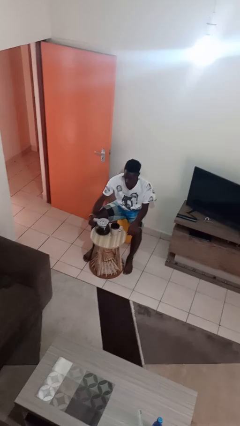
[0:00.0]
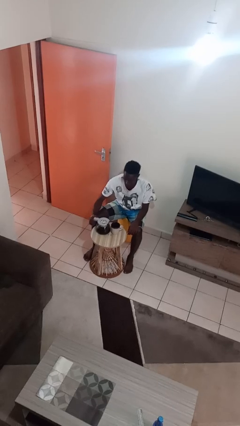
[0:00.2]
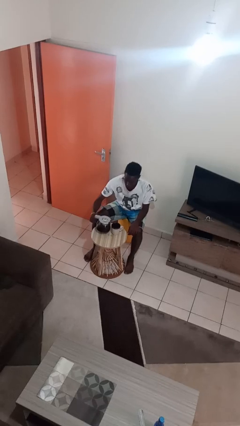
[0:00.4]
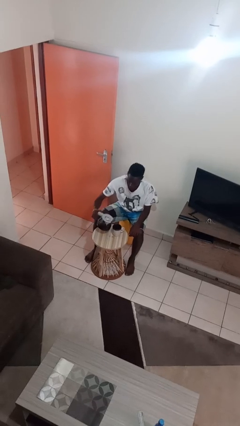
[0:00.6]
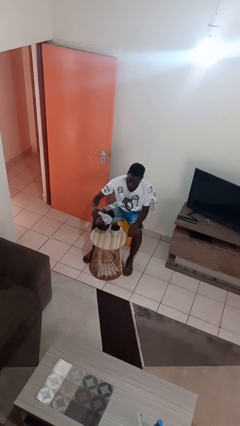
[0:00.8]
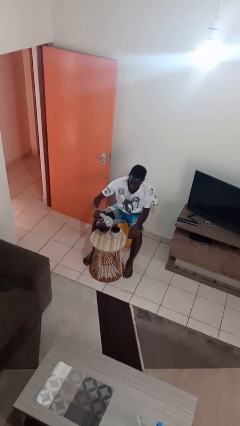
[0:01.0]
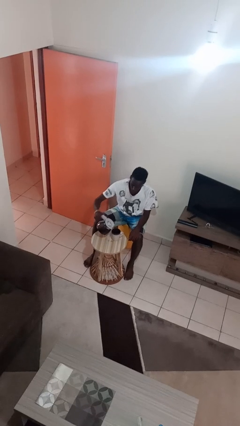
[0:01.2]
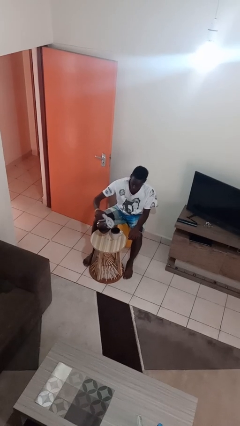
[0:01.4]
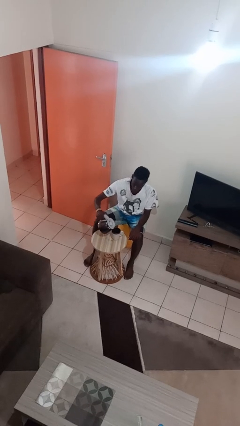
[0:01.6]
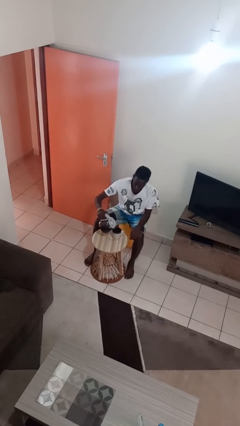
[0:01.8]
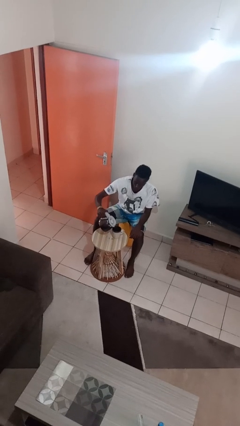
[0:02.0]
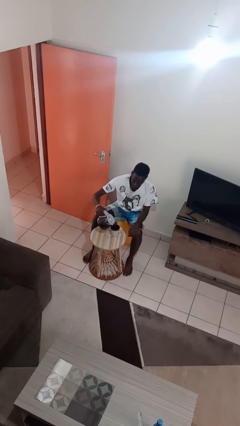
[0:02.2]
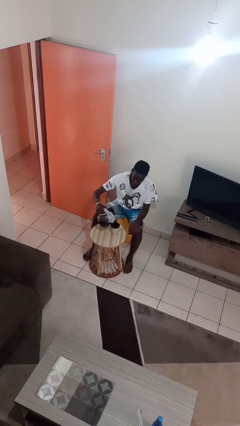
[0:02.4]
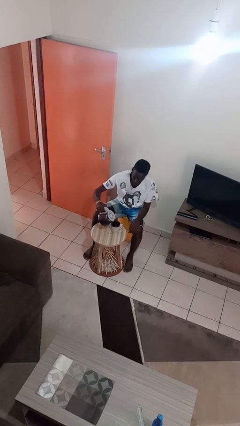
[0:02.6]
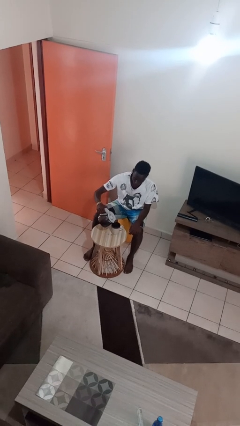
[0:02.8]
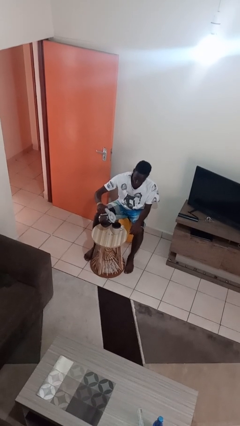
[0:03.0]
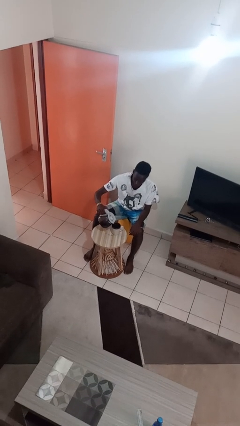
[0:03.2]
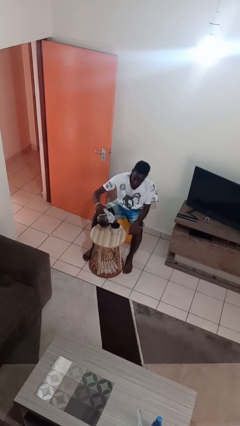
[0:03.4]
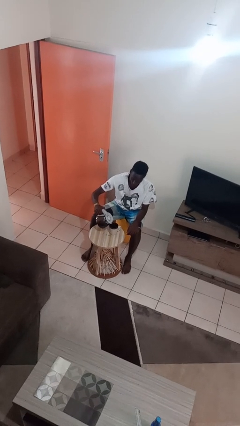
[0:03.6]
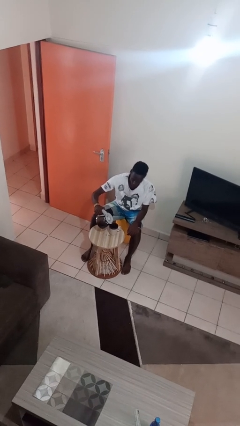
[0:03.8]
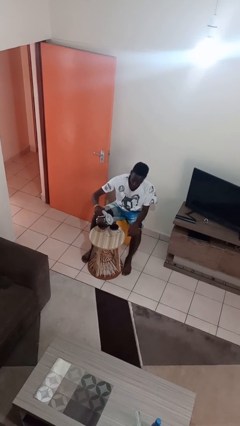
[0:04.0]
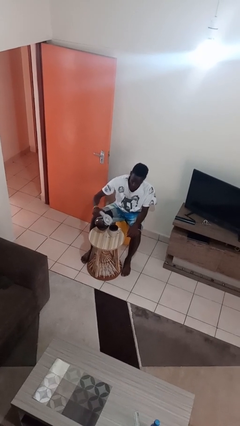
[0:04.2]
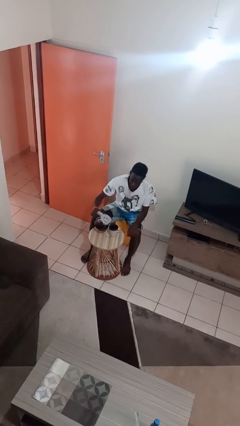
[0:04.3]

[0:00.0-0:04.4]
person pours coffee into mug

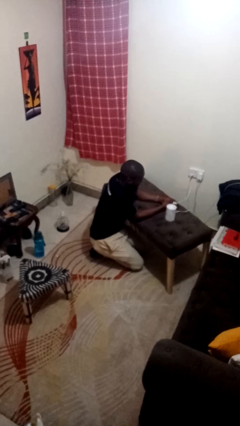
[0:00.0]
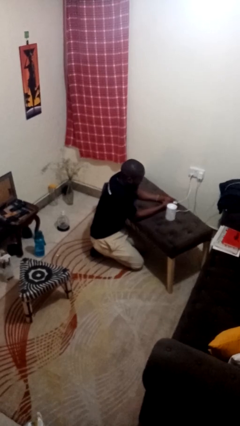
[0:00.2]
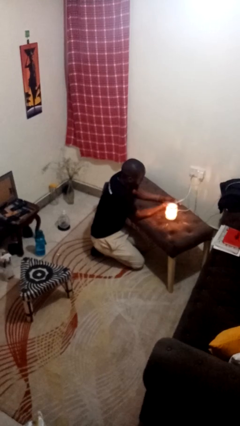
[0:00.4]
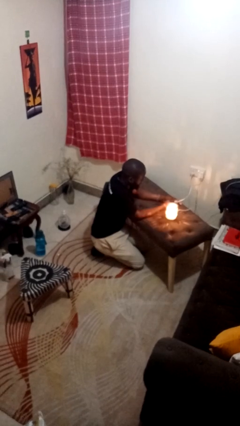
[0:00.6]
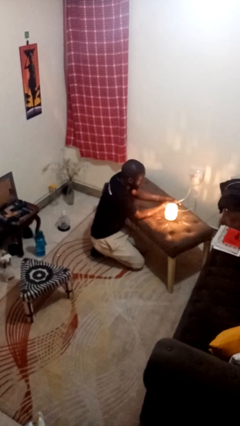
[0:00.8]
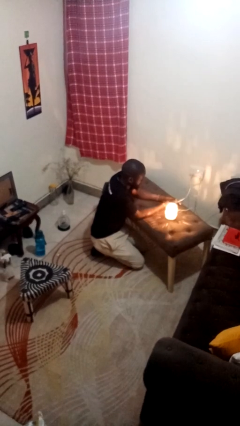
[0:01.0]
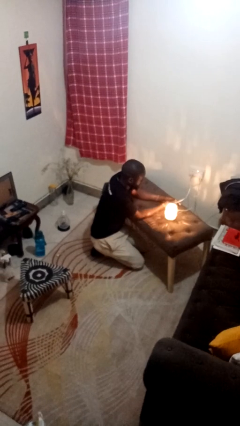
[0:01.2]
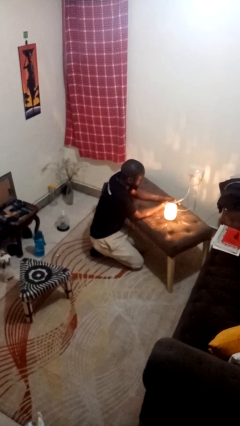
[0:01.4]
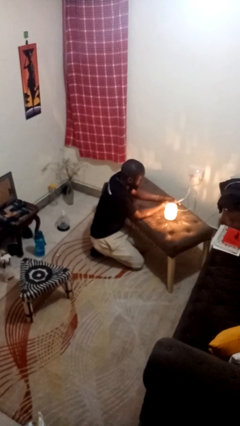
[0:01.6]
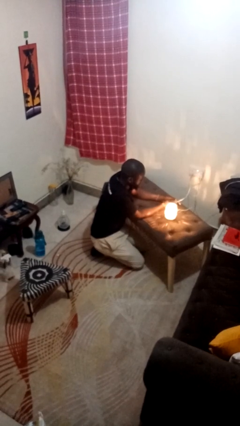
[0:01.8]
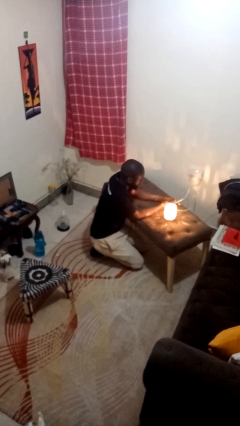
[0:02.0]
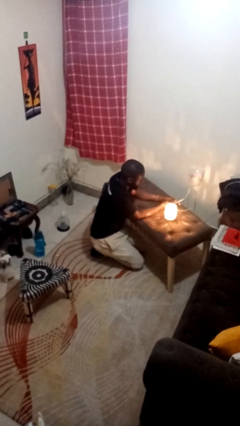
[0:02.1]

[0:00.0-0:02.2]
person turns on lamp

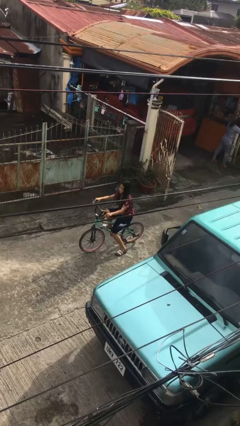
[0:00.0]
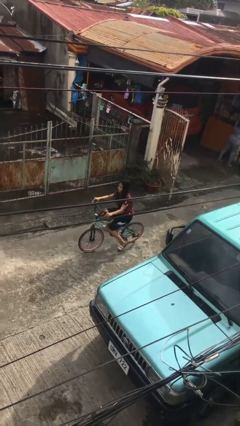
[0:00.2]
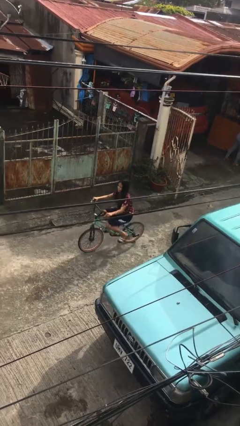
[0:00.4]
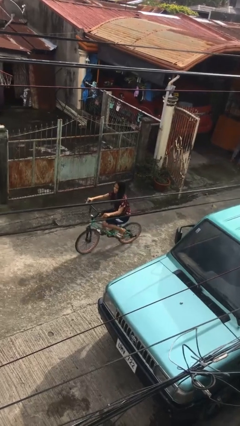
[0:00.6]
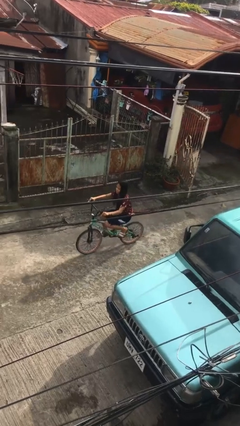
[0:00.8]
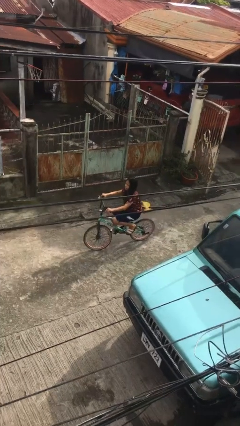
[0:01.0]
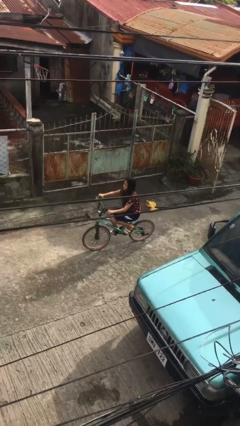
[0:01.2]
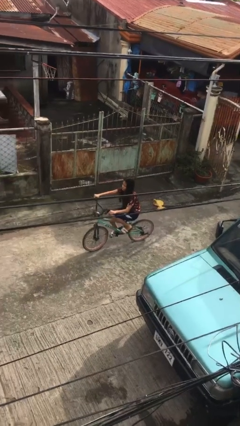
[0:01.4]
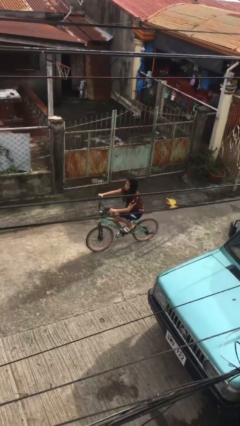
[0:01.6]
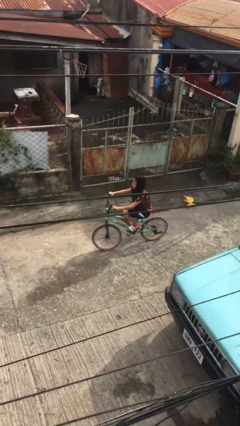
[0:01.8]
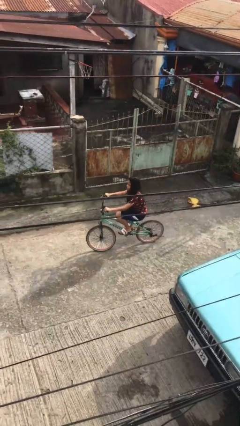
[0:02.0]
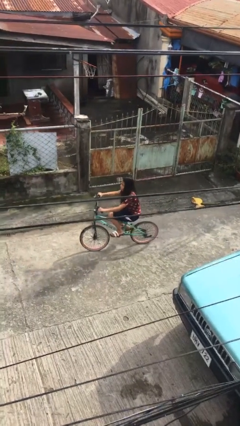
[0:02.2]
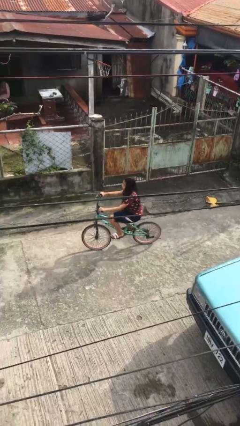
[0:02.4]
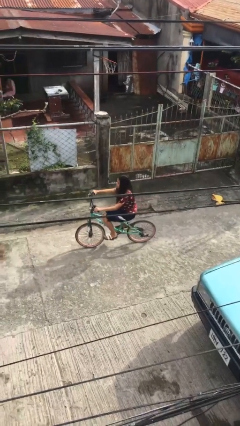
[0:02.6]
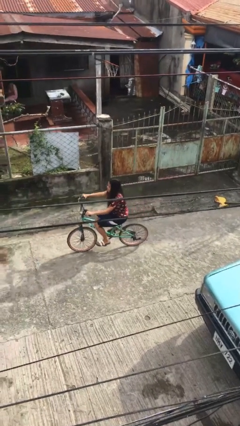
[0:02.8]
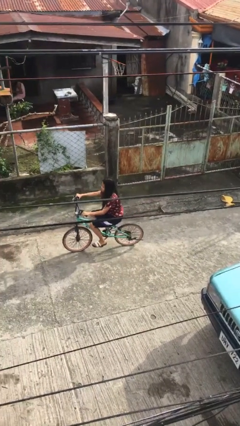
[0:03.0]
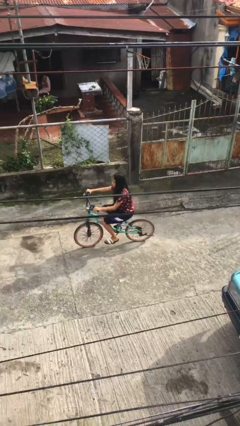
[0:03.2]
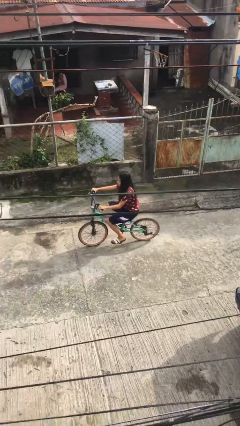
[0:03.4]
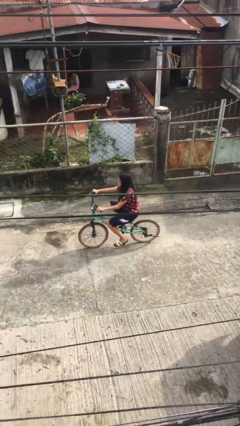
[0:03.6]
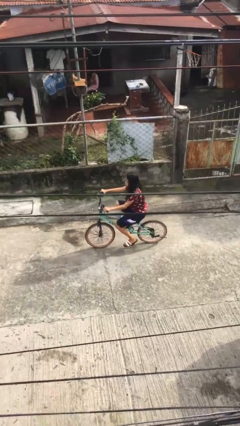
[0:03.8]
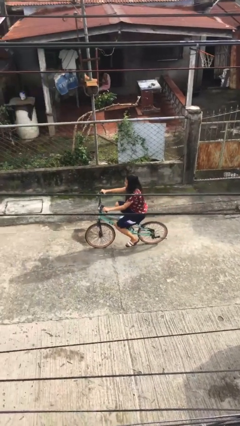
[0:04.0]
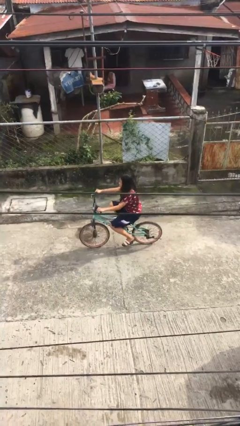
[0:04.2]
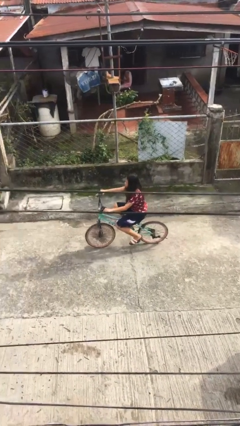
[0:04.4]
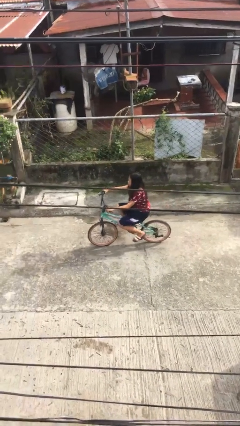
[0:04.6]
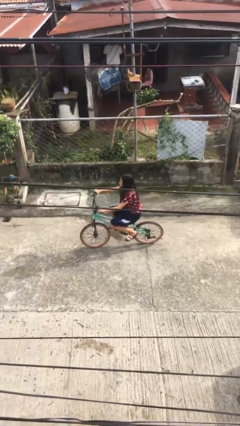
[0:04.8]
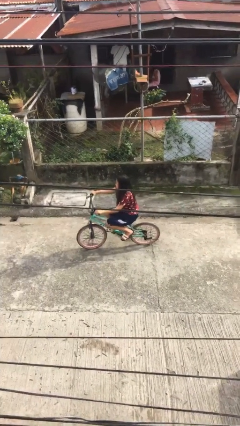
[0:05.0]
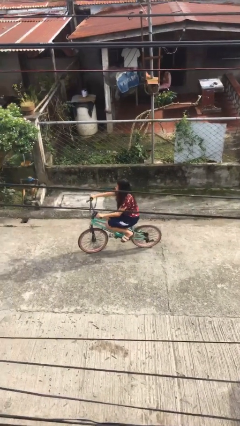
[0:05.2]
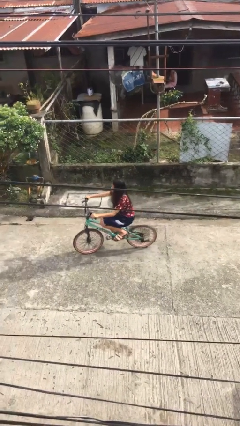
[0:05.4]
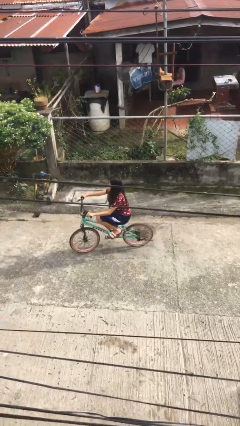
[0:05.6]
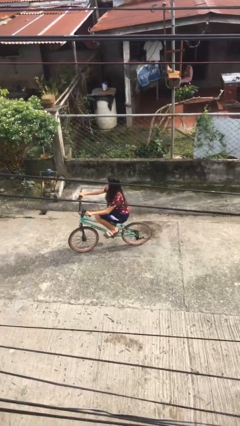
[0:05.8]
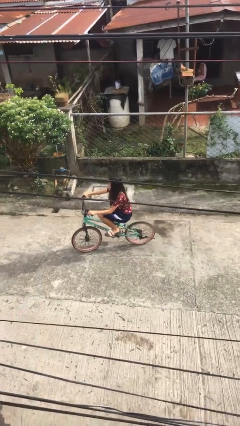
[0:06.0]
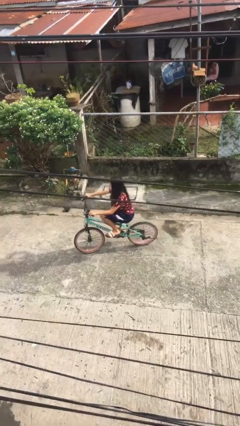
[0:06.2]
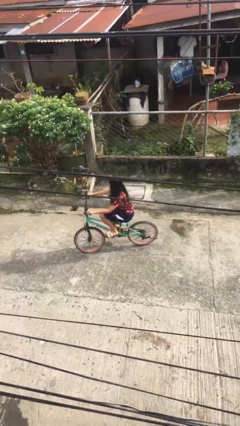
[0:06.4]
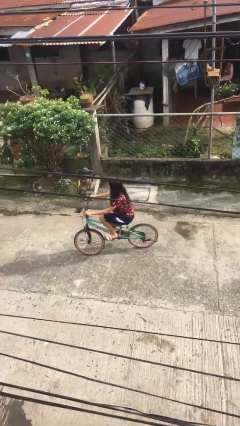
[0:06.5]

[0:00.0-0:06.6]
person rides bicycle

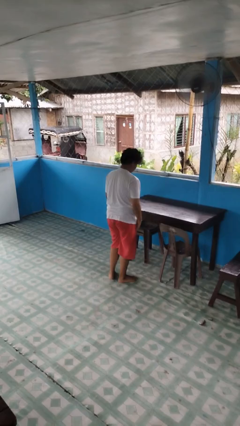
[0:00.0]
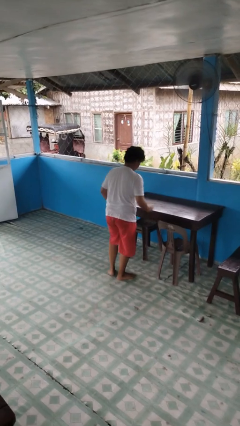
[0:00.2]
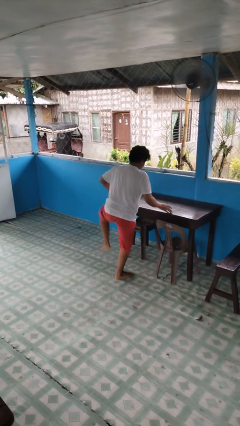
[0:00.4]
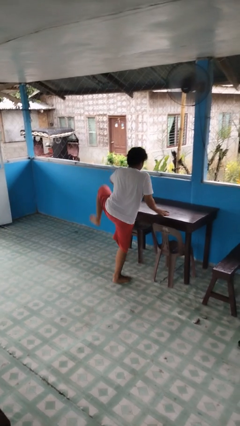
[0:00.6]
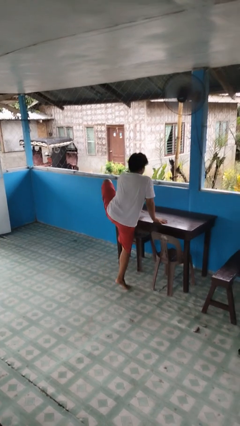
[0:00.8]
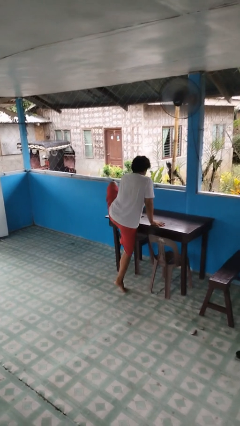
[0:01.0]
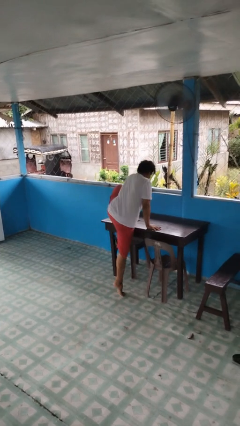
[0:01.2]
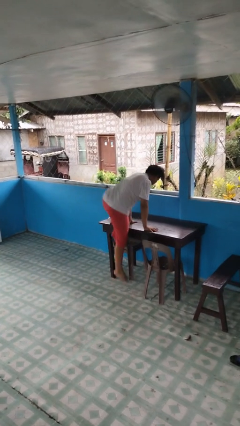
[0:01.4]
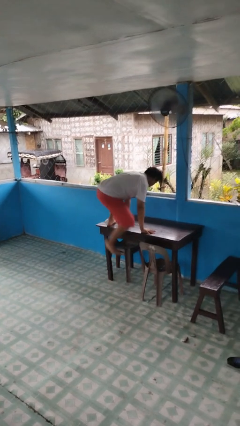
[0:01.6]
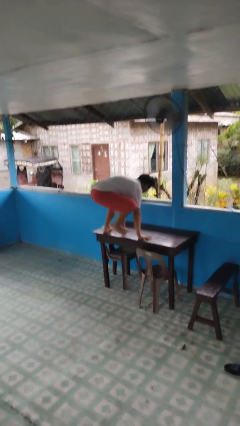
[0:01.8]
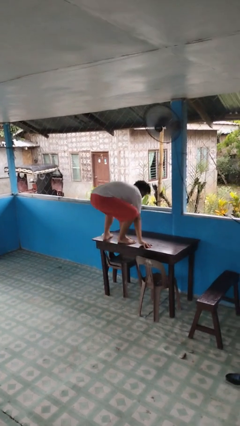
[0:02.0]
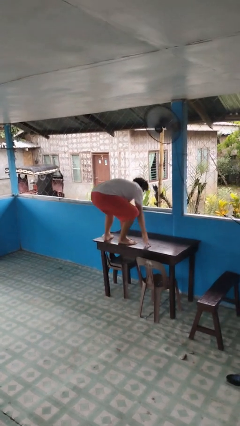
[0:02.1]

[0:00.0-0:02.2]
person climbs on table

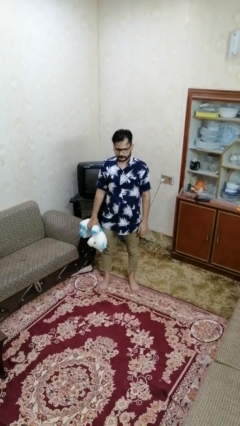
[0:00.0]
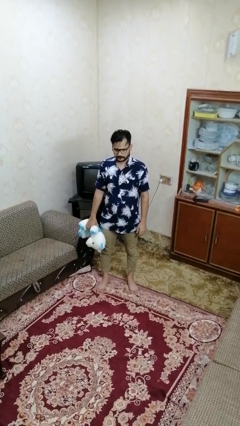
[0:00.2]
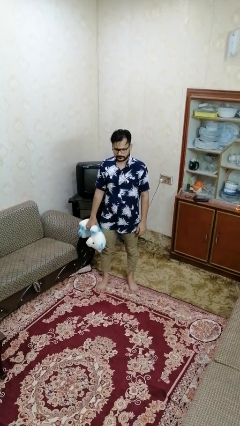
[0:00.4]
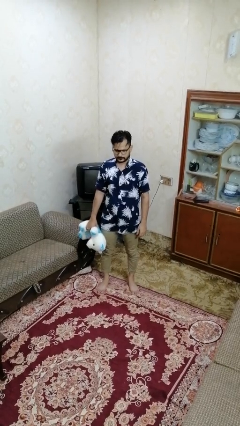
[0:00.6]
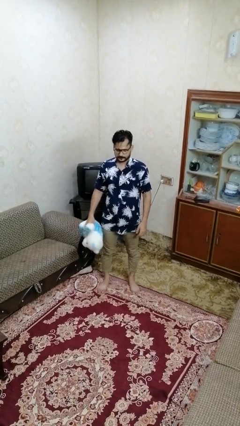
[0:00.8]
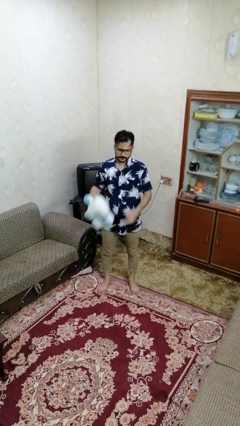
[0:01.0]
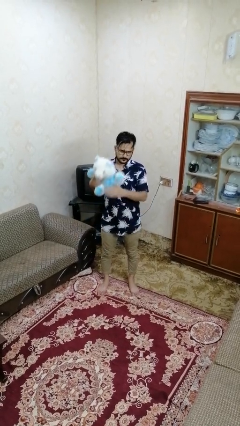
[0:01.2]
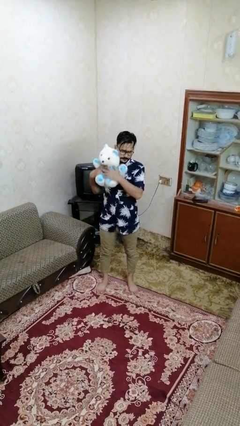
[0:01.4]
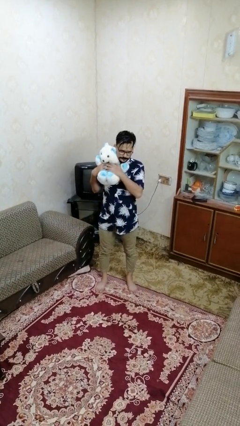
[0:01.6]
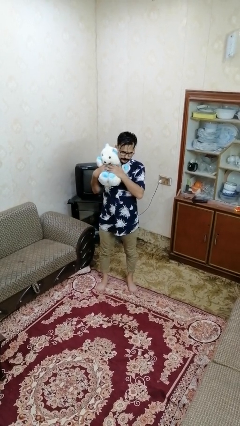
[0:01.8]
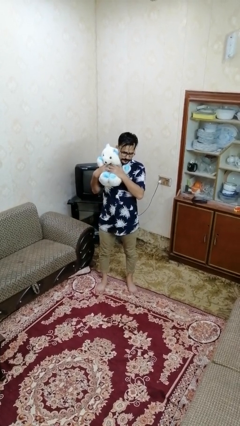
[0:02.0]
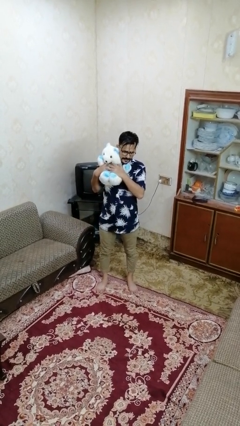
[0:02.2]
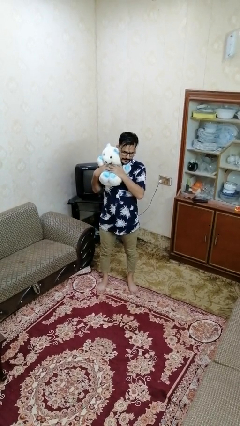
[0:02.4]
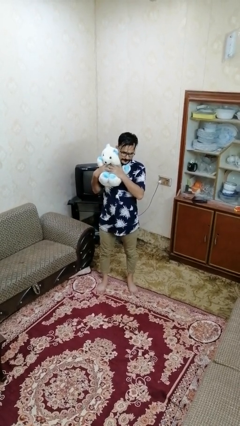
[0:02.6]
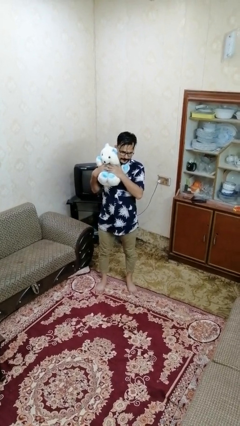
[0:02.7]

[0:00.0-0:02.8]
person hugs stuffed animal
